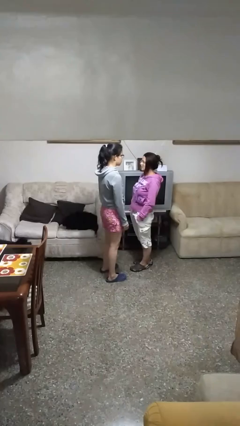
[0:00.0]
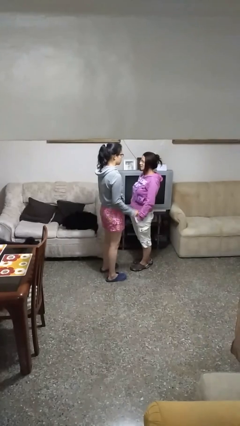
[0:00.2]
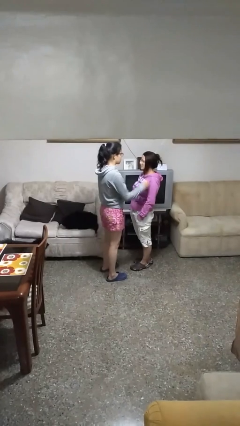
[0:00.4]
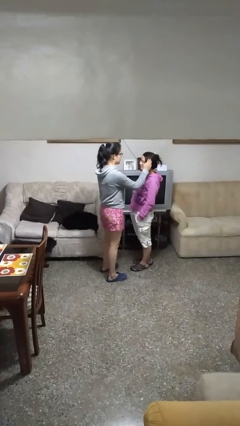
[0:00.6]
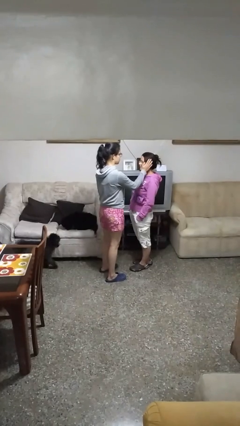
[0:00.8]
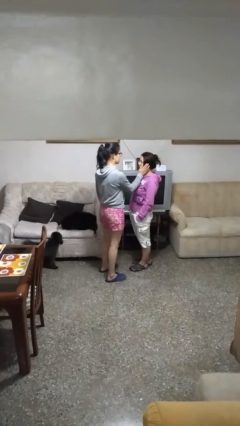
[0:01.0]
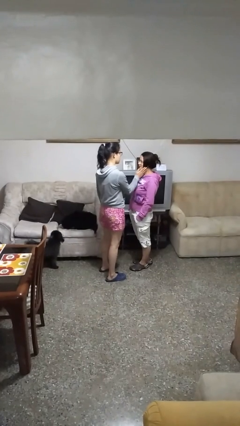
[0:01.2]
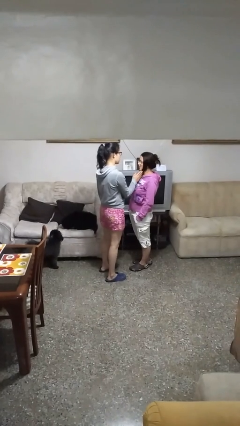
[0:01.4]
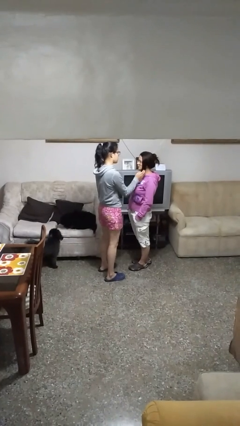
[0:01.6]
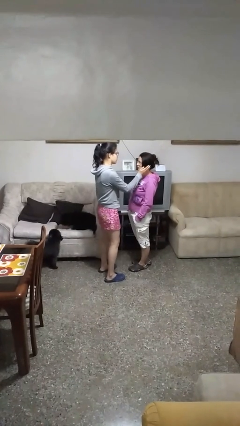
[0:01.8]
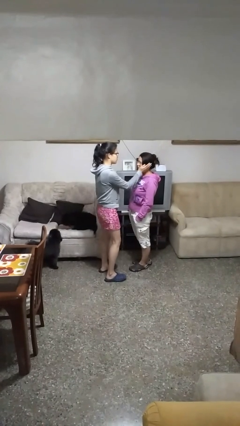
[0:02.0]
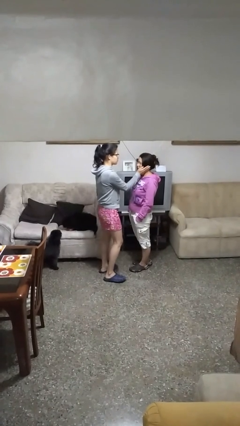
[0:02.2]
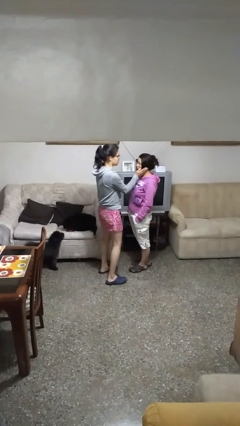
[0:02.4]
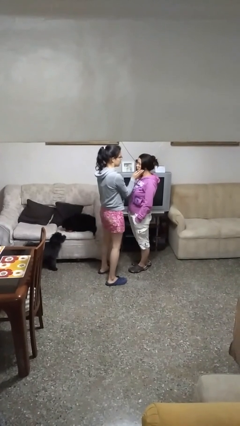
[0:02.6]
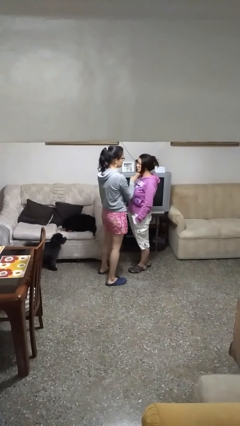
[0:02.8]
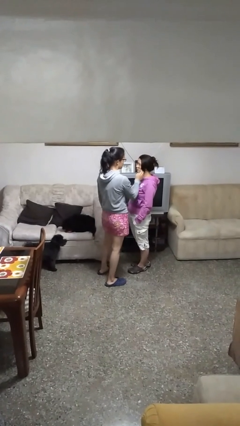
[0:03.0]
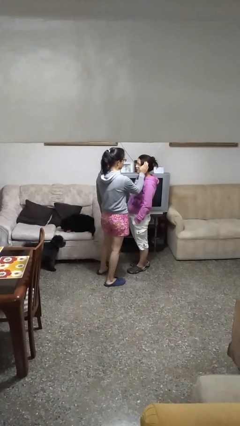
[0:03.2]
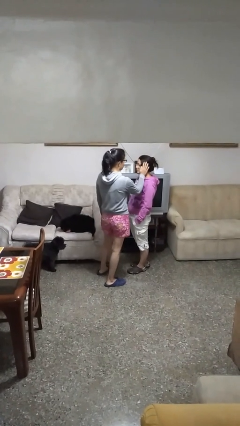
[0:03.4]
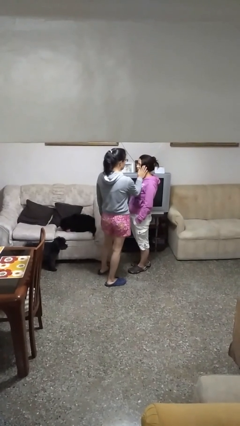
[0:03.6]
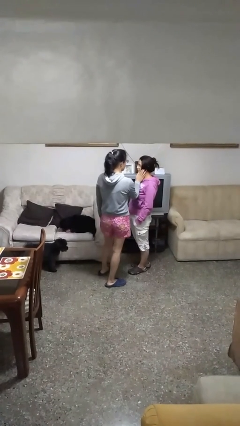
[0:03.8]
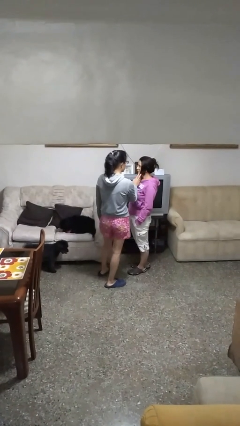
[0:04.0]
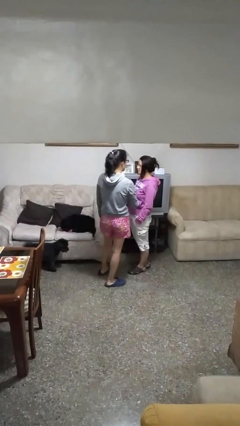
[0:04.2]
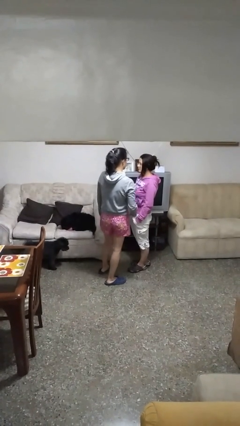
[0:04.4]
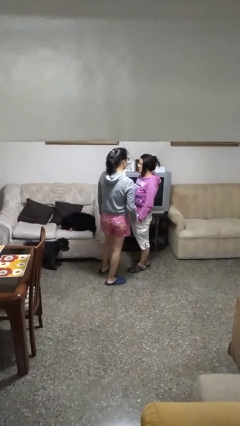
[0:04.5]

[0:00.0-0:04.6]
person touches face of person

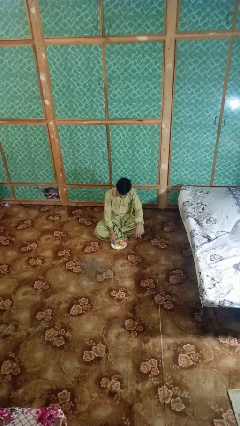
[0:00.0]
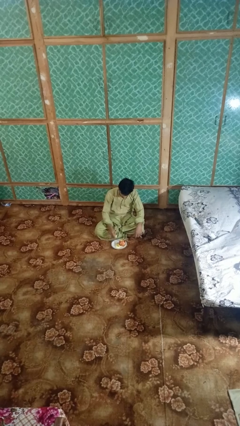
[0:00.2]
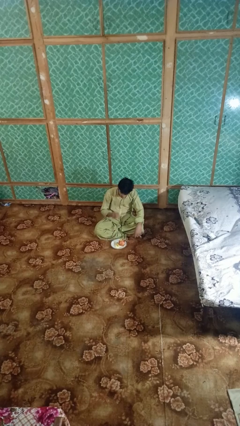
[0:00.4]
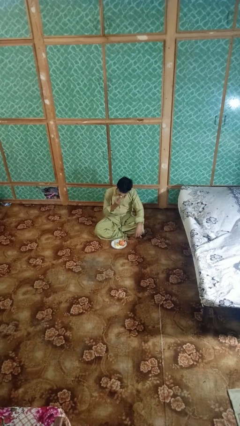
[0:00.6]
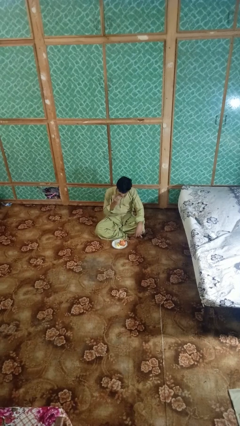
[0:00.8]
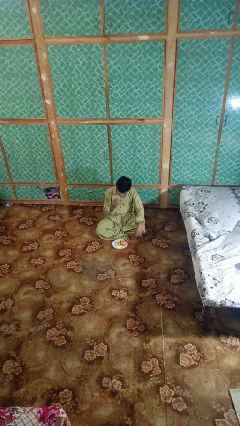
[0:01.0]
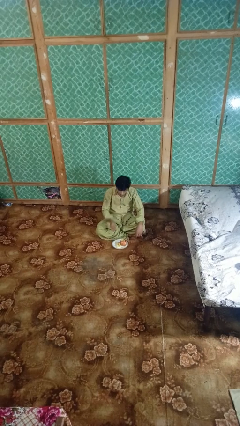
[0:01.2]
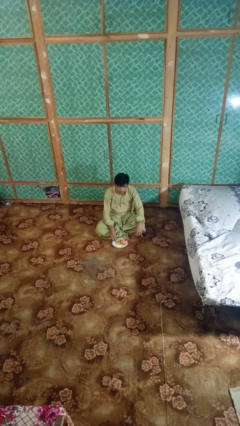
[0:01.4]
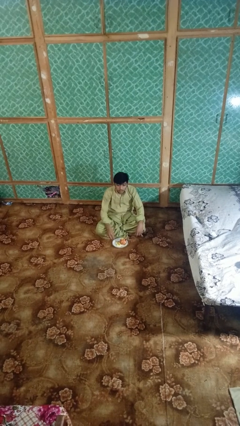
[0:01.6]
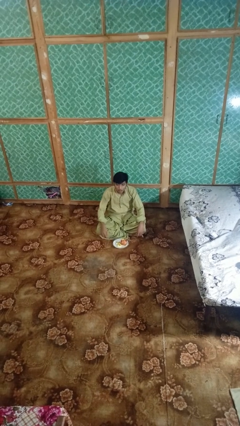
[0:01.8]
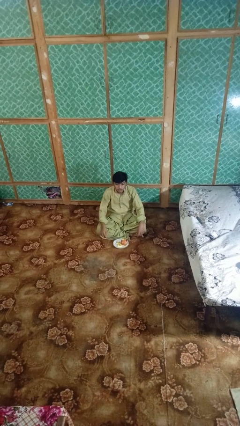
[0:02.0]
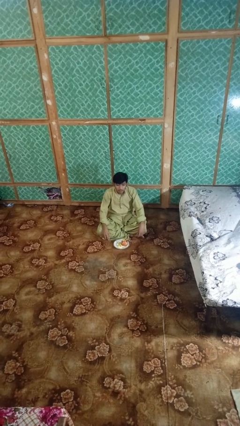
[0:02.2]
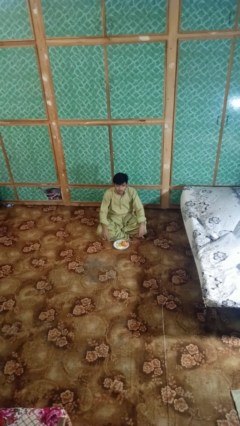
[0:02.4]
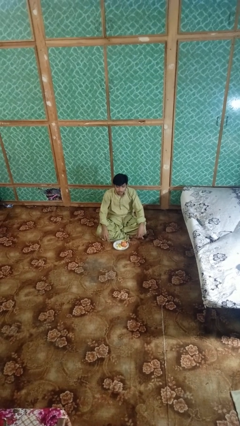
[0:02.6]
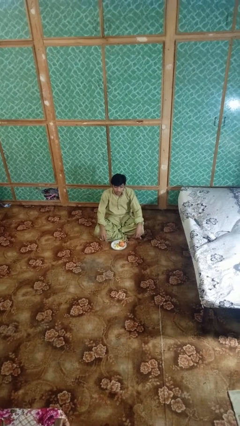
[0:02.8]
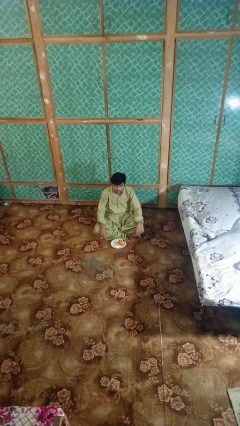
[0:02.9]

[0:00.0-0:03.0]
person eats apple

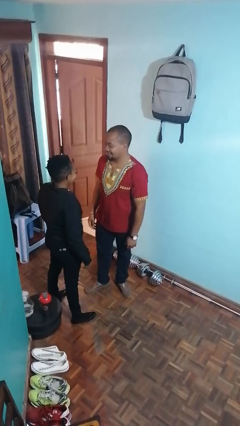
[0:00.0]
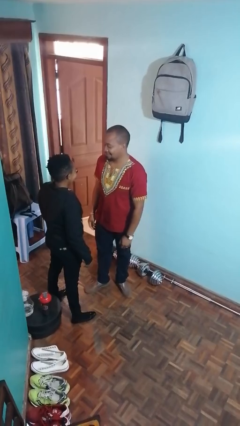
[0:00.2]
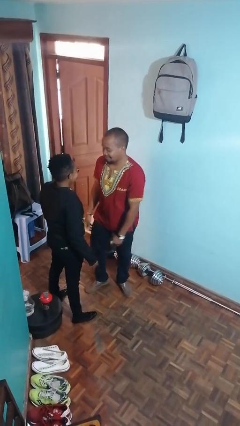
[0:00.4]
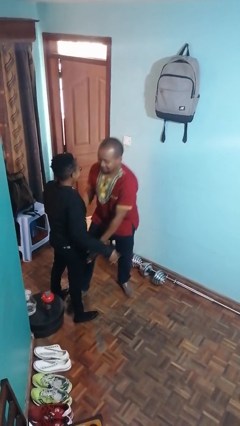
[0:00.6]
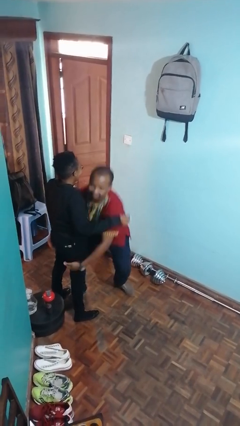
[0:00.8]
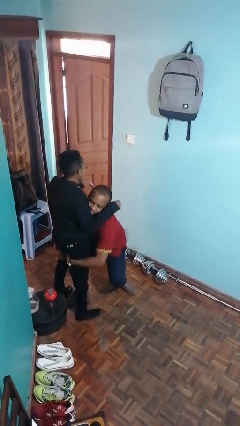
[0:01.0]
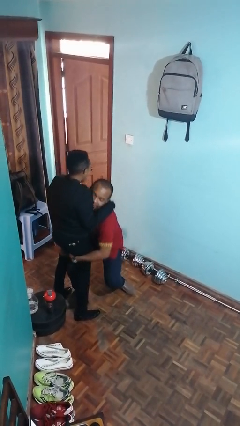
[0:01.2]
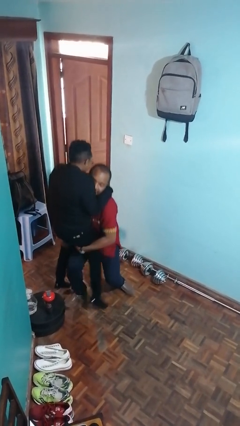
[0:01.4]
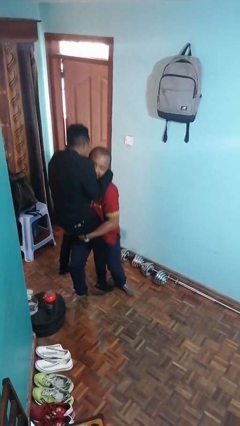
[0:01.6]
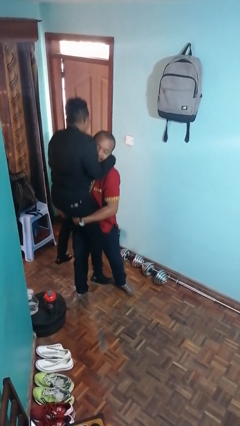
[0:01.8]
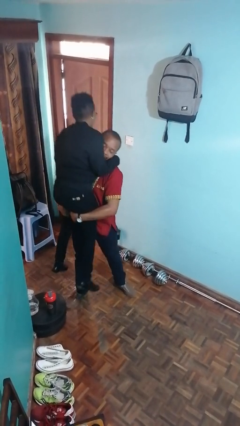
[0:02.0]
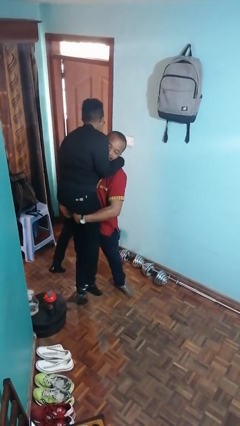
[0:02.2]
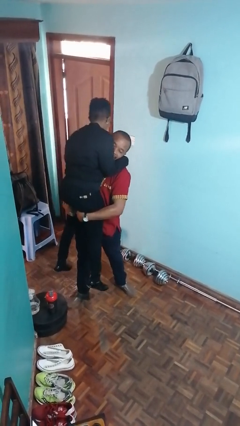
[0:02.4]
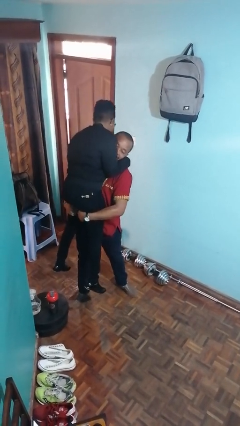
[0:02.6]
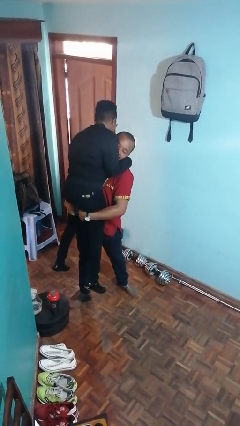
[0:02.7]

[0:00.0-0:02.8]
person picks up person

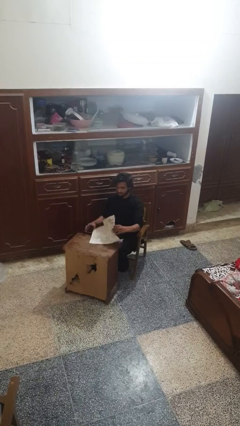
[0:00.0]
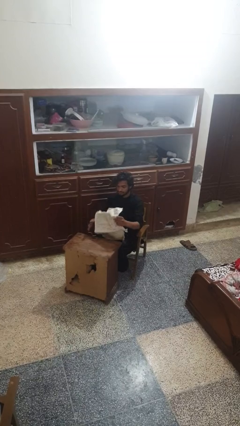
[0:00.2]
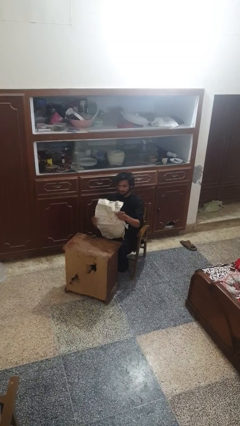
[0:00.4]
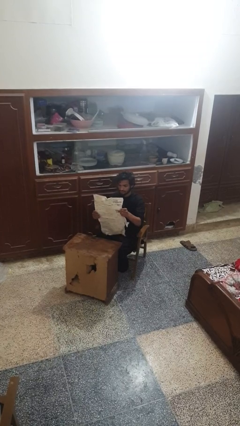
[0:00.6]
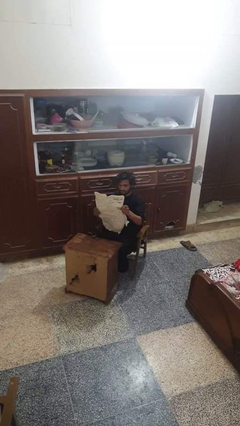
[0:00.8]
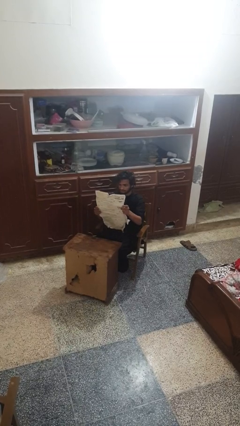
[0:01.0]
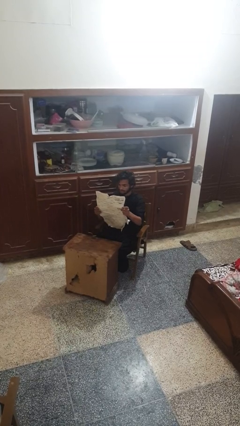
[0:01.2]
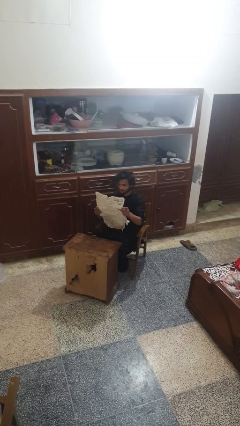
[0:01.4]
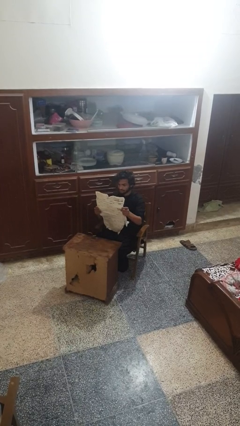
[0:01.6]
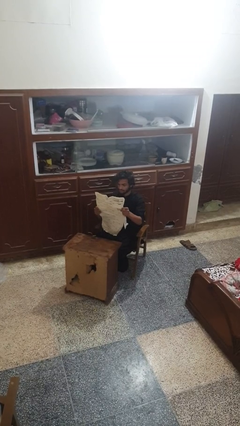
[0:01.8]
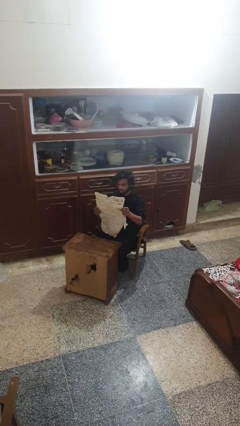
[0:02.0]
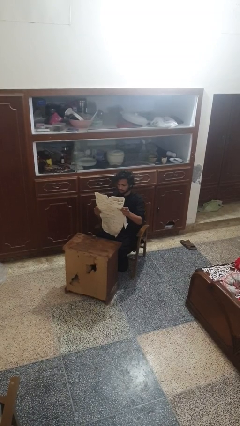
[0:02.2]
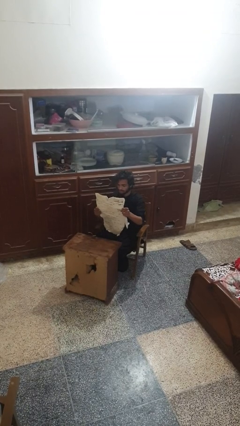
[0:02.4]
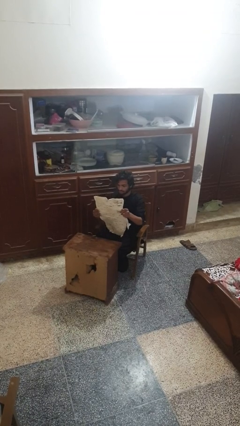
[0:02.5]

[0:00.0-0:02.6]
person reads newspaper

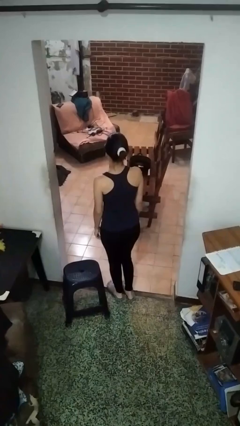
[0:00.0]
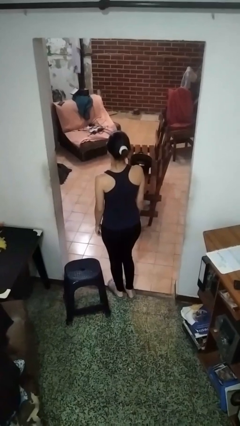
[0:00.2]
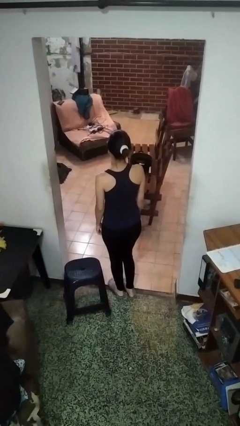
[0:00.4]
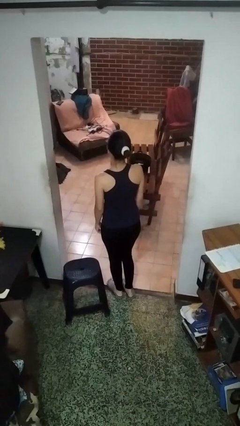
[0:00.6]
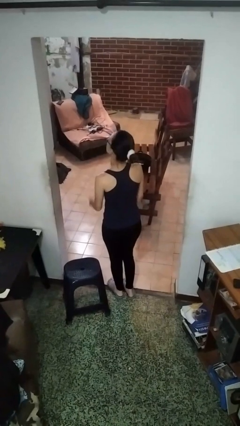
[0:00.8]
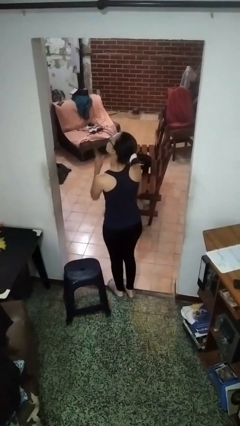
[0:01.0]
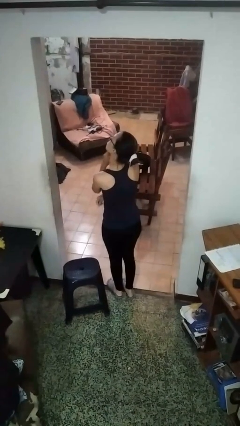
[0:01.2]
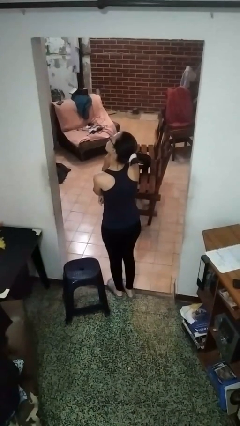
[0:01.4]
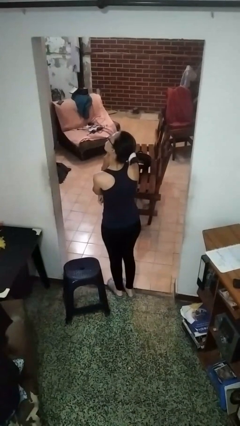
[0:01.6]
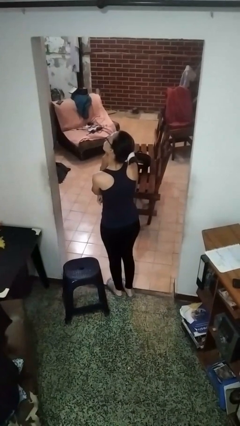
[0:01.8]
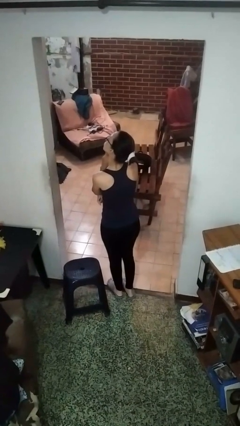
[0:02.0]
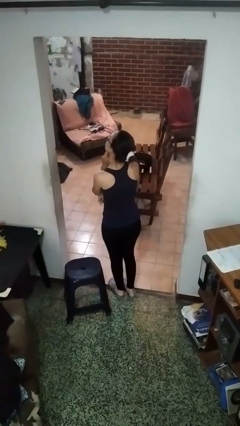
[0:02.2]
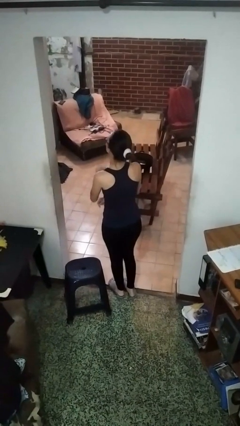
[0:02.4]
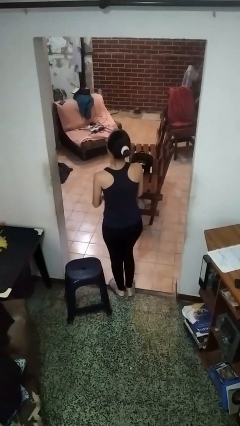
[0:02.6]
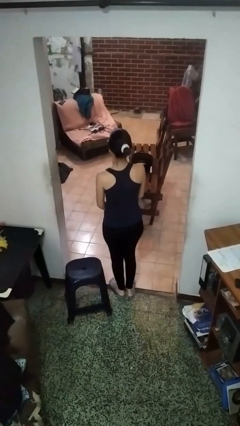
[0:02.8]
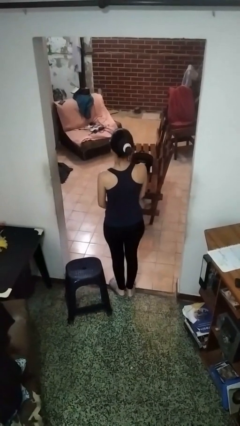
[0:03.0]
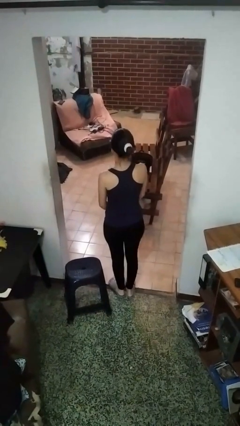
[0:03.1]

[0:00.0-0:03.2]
person strokes chin

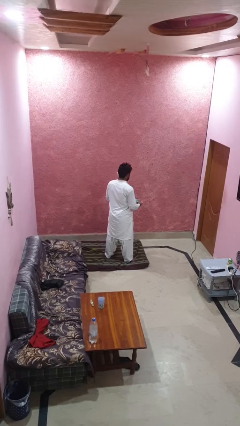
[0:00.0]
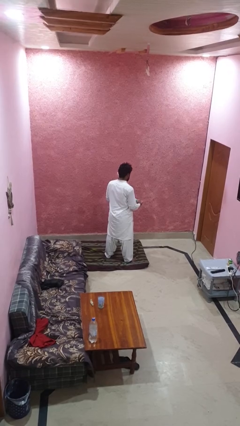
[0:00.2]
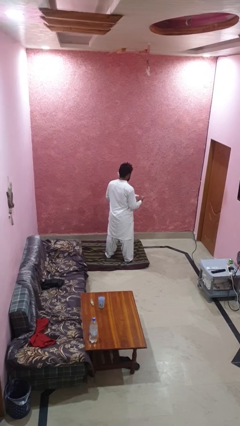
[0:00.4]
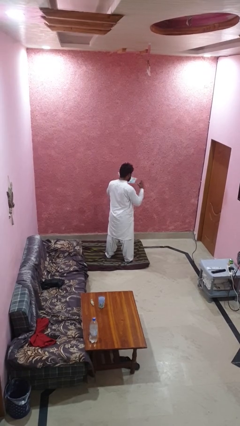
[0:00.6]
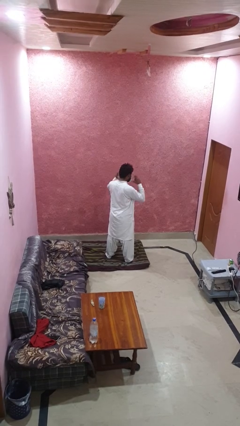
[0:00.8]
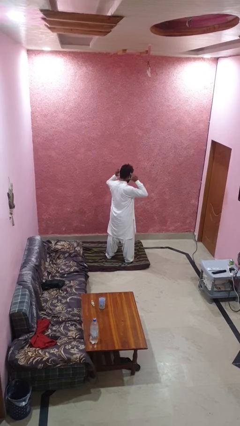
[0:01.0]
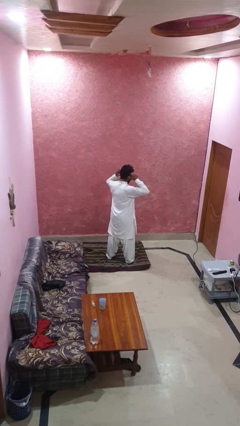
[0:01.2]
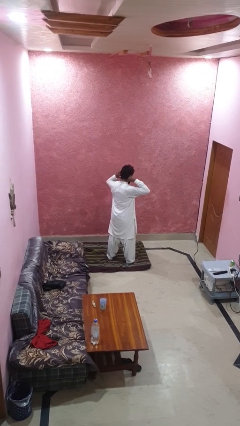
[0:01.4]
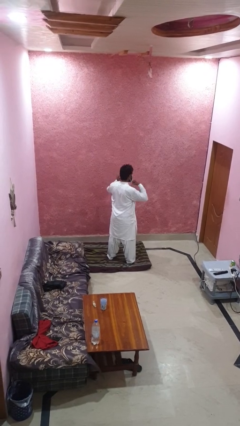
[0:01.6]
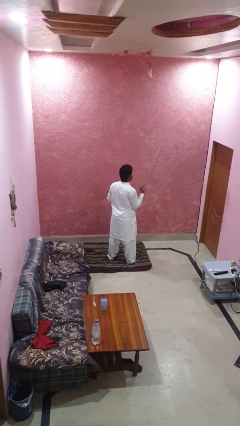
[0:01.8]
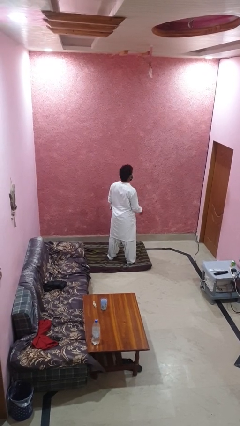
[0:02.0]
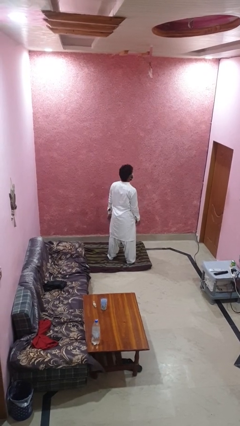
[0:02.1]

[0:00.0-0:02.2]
person puts on facemask
